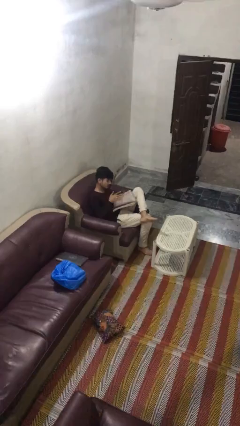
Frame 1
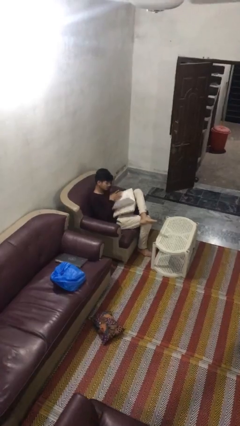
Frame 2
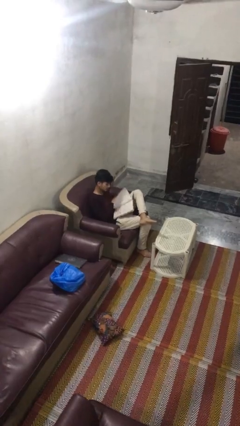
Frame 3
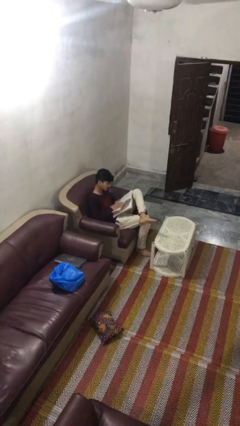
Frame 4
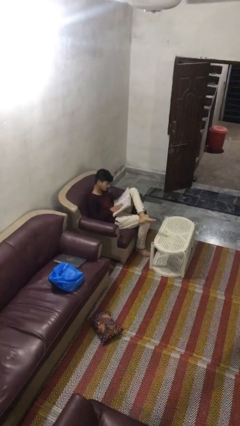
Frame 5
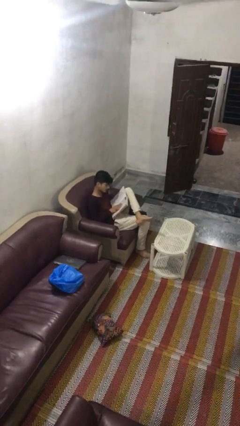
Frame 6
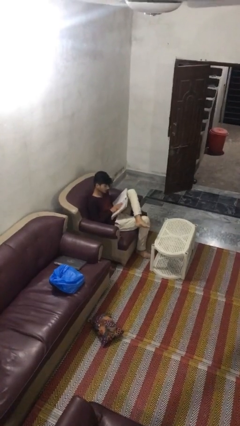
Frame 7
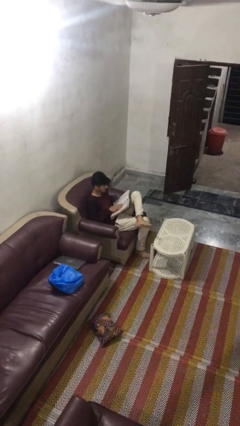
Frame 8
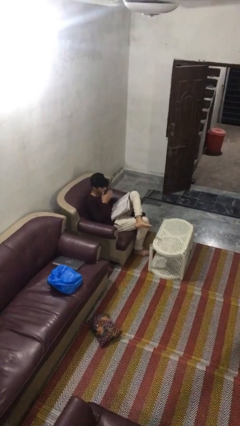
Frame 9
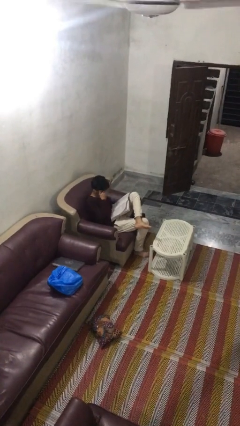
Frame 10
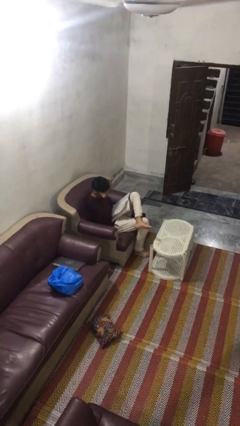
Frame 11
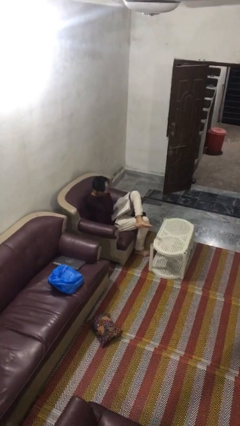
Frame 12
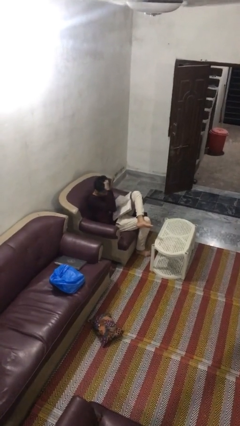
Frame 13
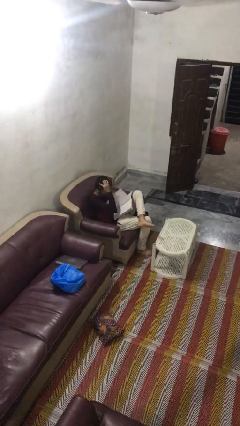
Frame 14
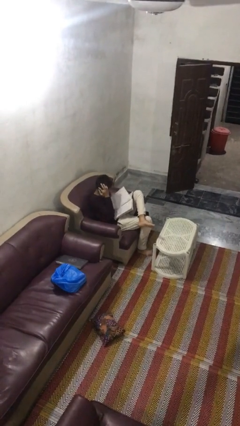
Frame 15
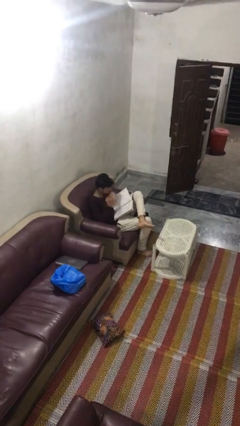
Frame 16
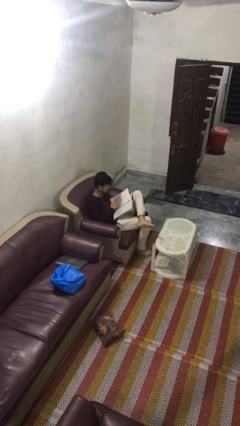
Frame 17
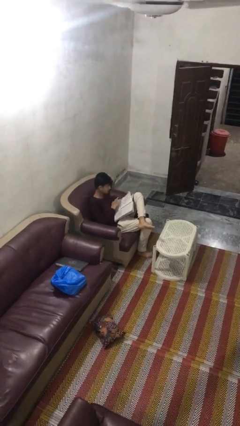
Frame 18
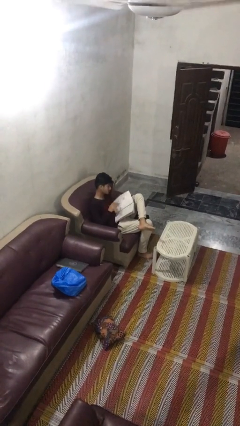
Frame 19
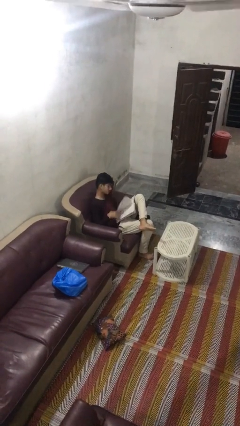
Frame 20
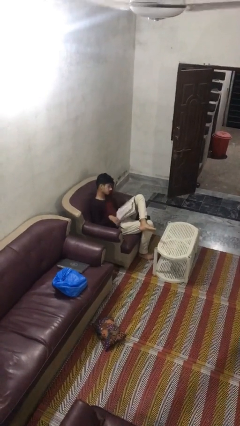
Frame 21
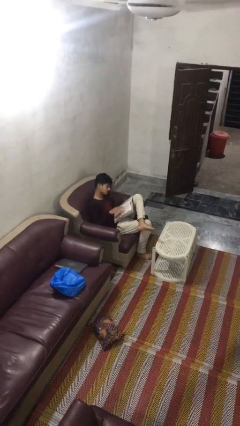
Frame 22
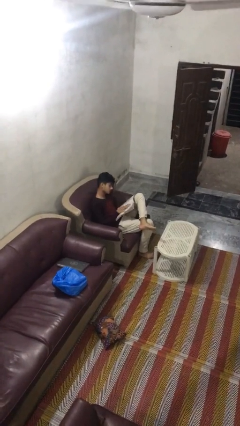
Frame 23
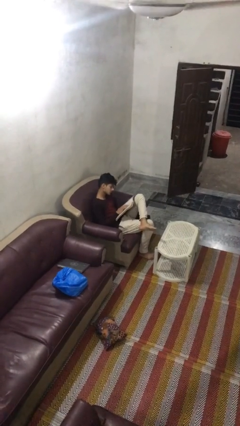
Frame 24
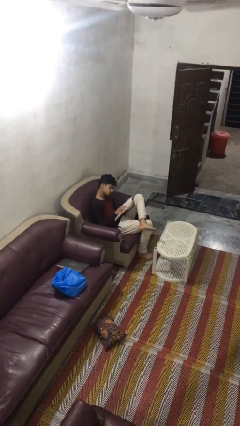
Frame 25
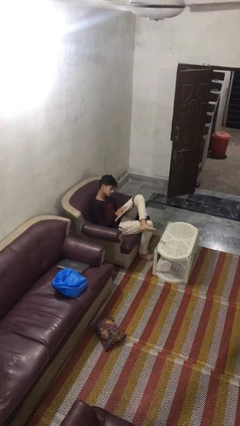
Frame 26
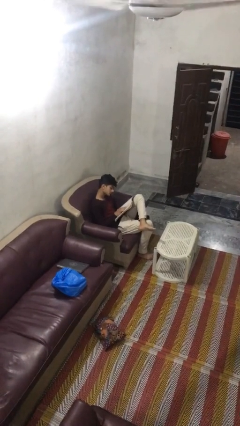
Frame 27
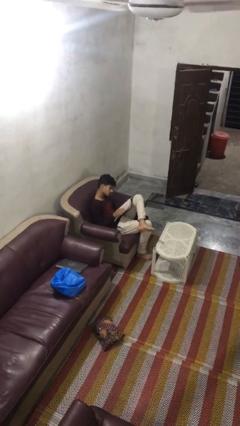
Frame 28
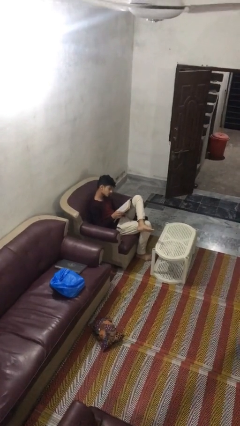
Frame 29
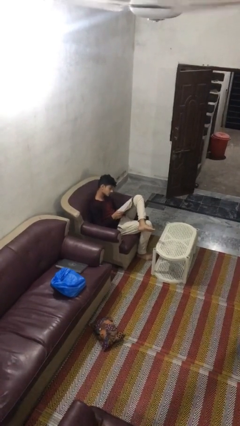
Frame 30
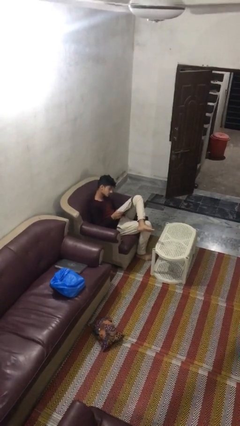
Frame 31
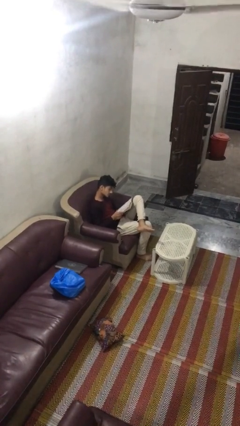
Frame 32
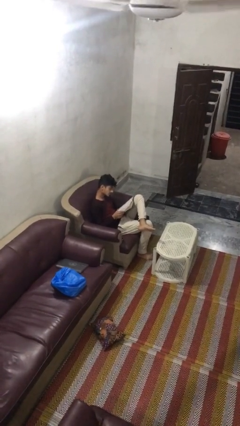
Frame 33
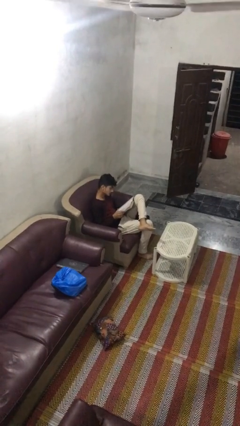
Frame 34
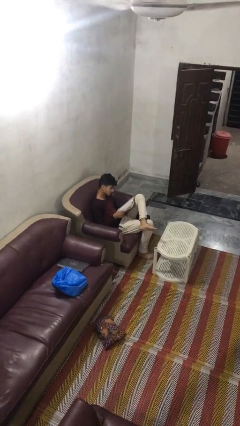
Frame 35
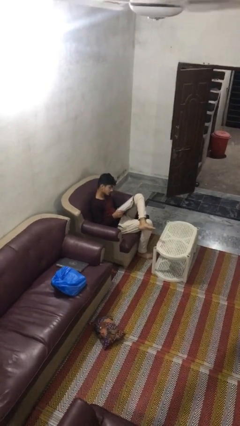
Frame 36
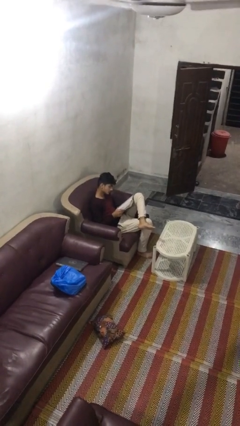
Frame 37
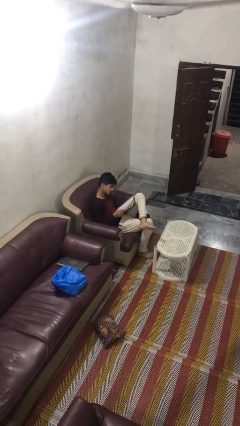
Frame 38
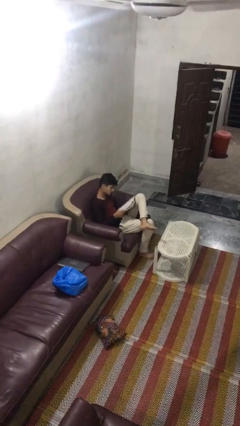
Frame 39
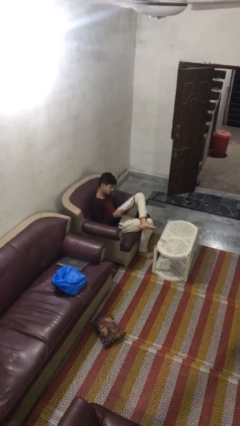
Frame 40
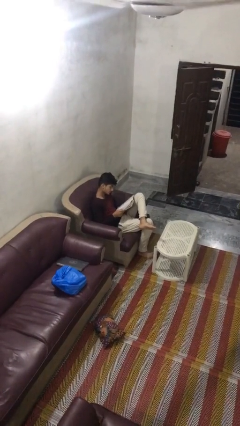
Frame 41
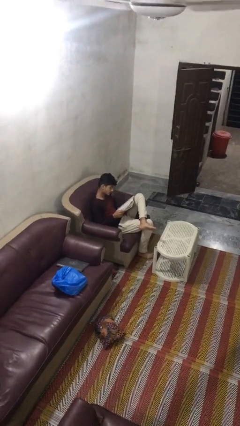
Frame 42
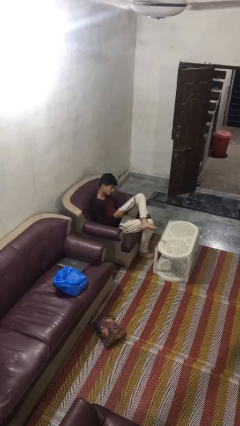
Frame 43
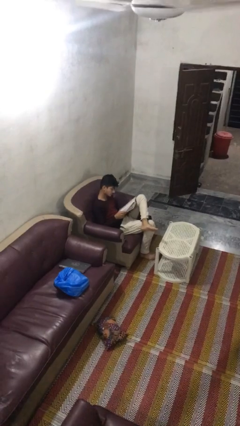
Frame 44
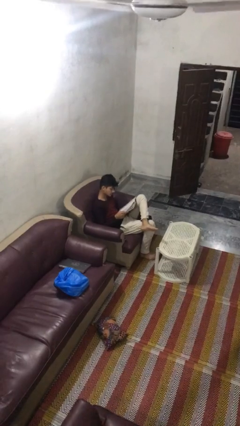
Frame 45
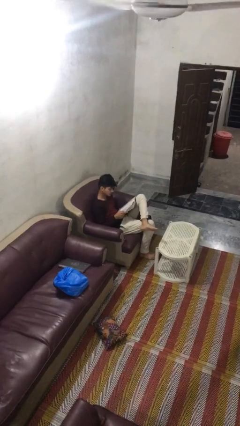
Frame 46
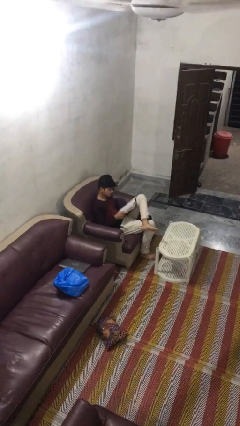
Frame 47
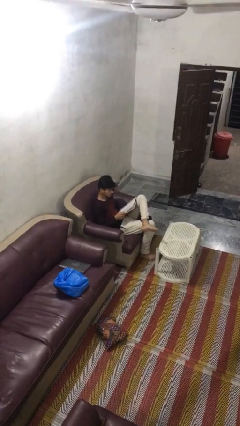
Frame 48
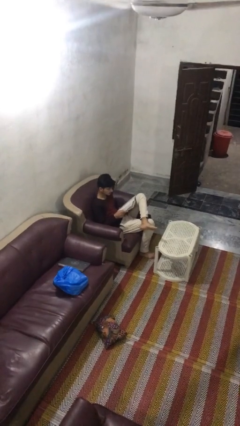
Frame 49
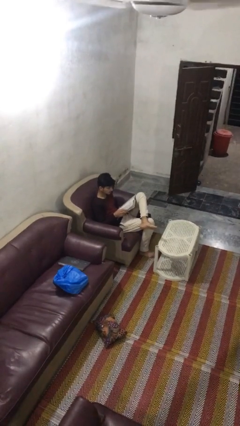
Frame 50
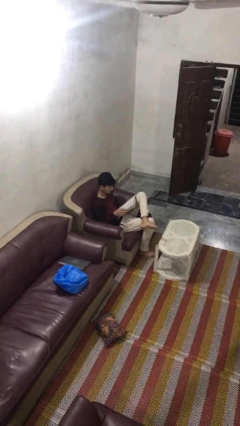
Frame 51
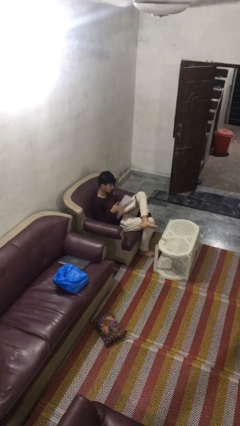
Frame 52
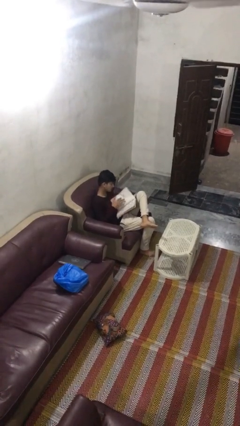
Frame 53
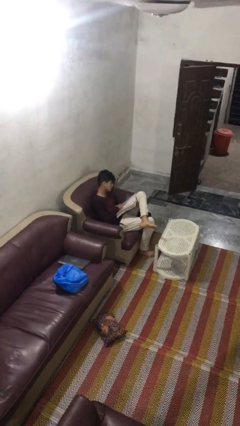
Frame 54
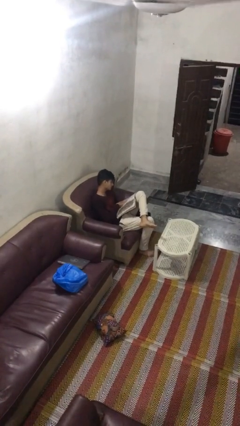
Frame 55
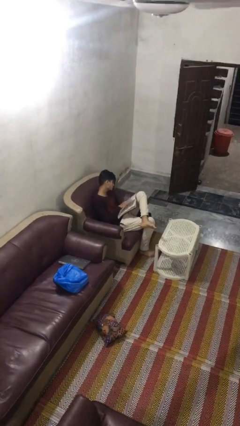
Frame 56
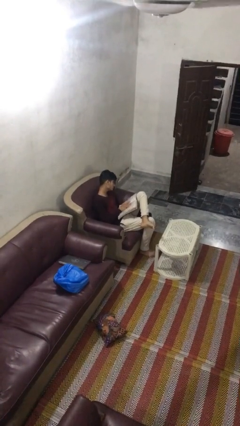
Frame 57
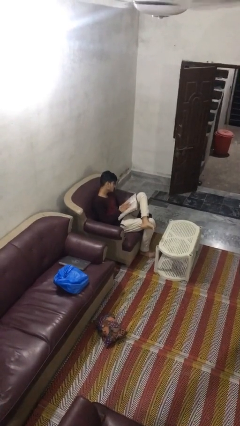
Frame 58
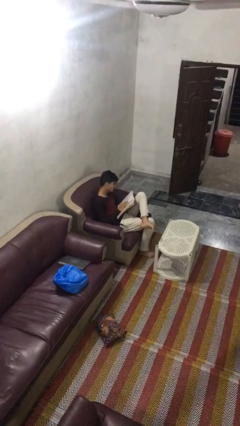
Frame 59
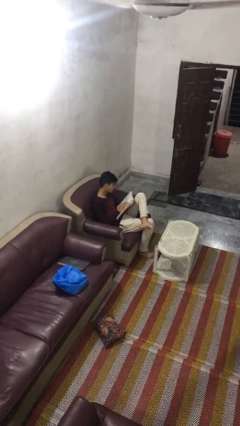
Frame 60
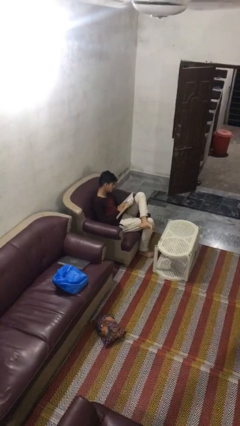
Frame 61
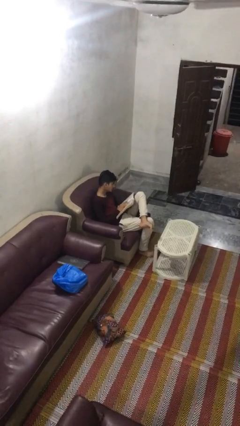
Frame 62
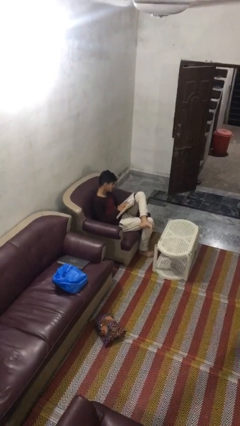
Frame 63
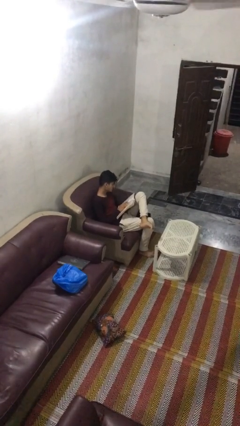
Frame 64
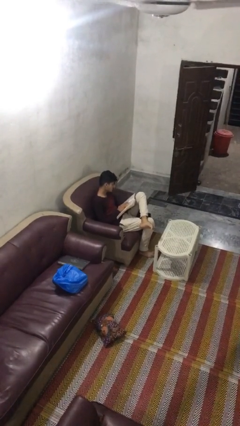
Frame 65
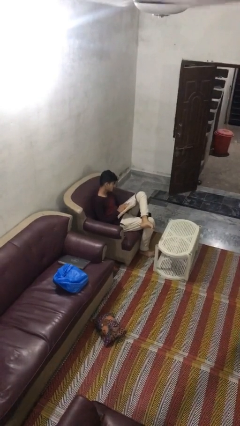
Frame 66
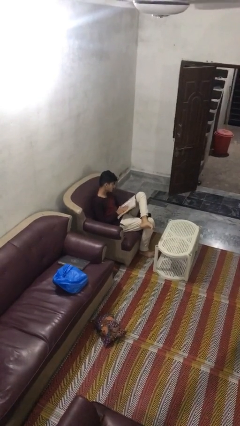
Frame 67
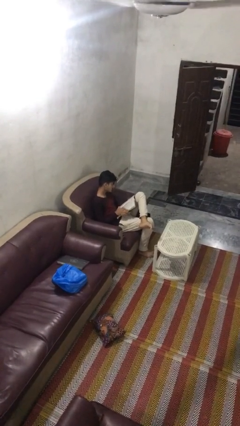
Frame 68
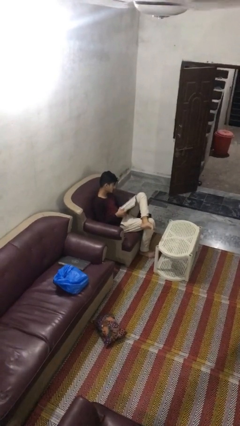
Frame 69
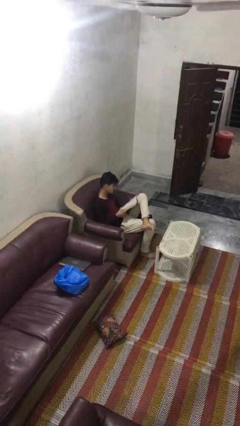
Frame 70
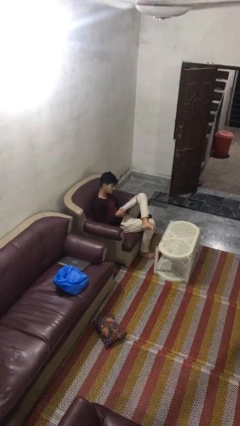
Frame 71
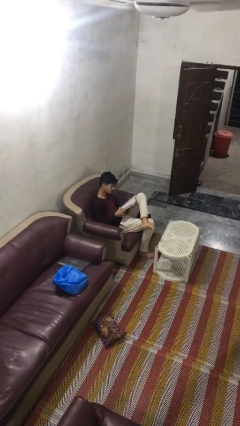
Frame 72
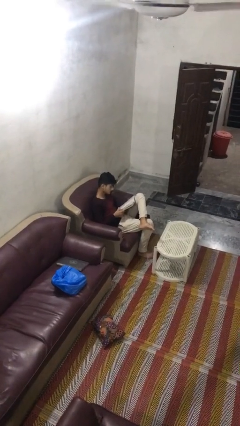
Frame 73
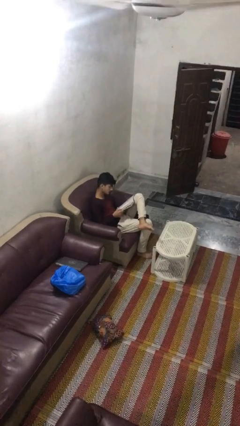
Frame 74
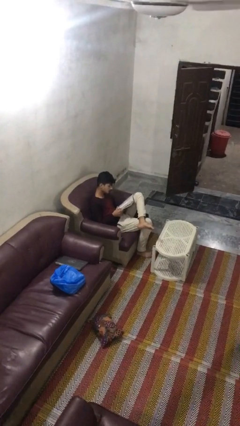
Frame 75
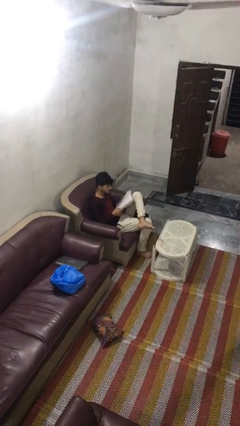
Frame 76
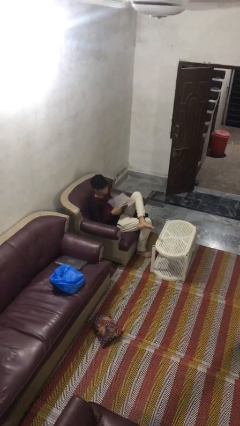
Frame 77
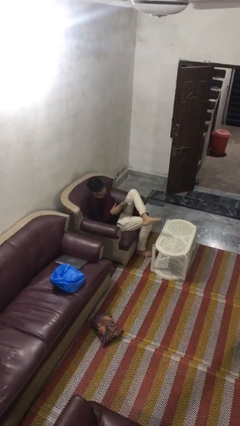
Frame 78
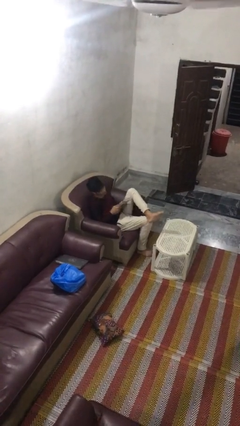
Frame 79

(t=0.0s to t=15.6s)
person reads document

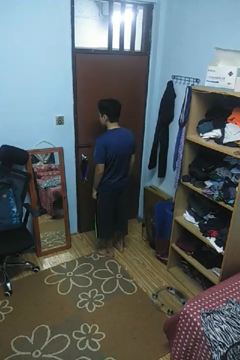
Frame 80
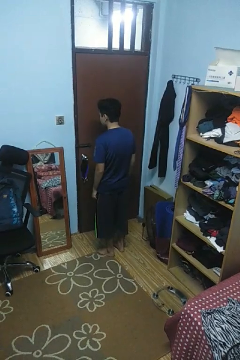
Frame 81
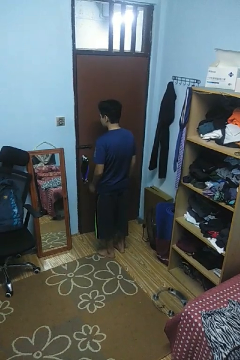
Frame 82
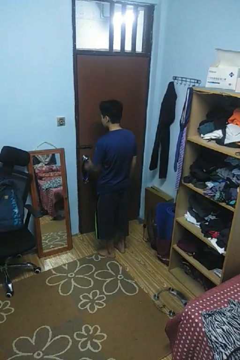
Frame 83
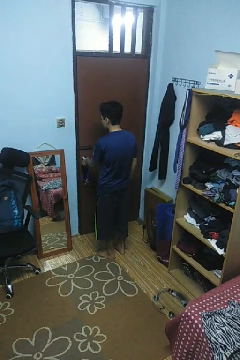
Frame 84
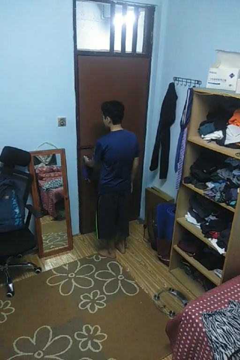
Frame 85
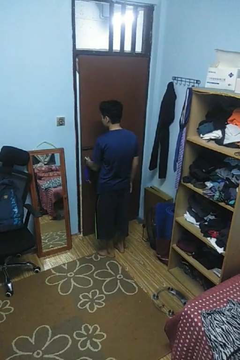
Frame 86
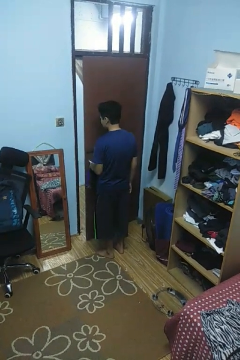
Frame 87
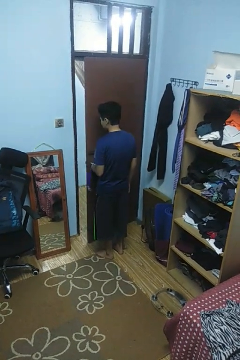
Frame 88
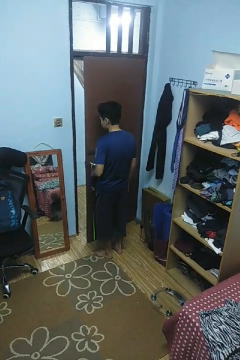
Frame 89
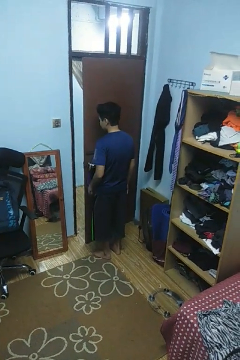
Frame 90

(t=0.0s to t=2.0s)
person opens facility door

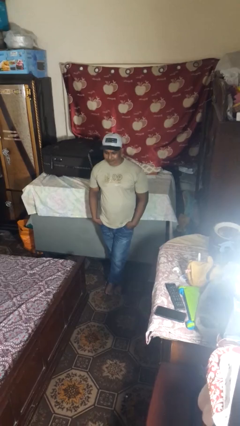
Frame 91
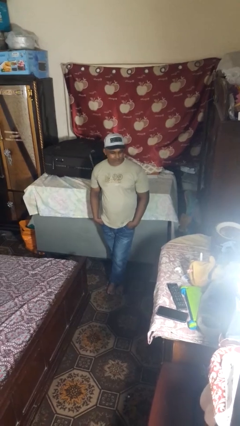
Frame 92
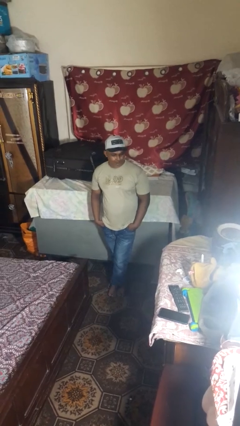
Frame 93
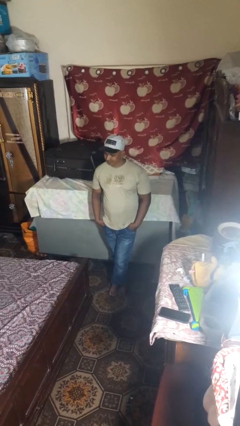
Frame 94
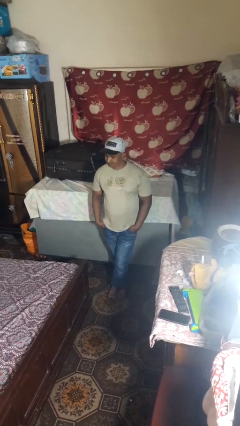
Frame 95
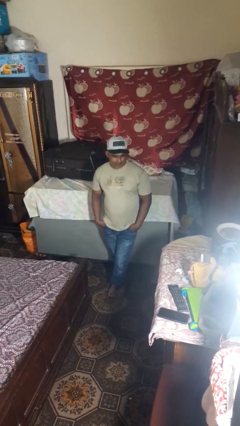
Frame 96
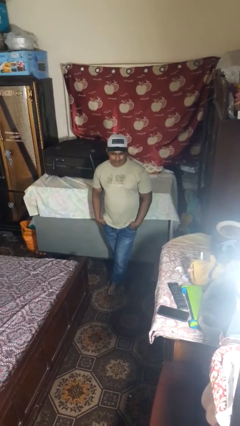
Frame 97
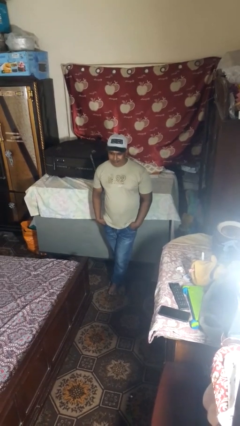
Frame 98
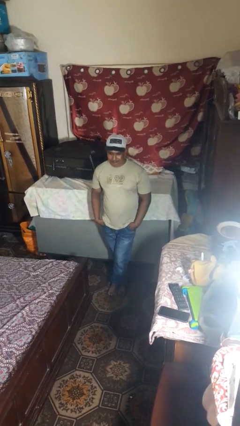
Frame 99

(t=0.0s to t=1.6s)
person shakes head
